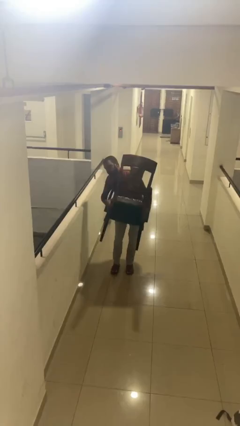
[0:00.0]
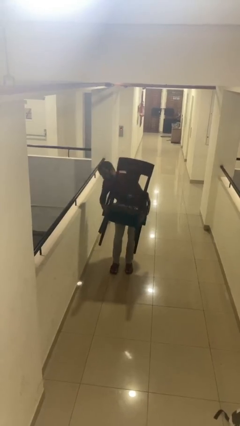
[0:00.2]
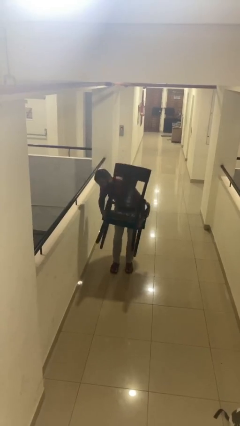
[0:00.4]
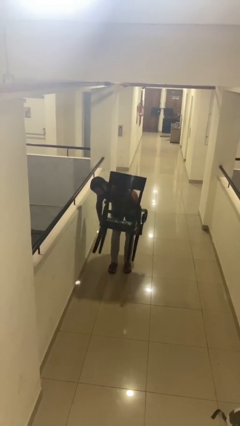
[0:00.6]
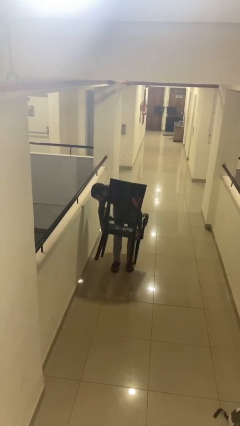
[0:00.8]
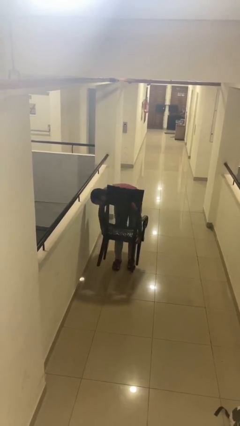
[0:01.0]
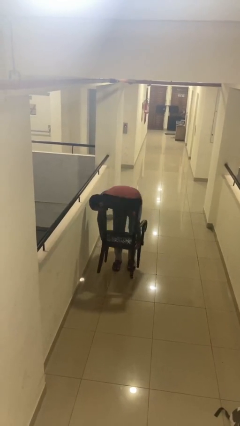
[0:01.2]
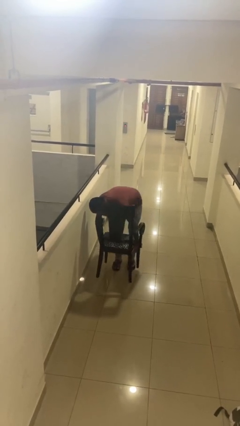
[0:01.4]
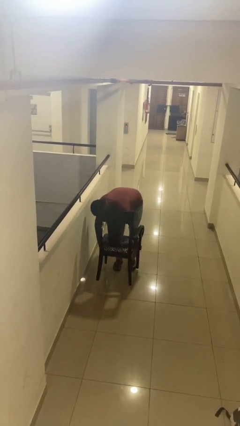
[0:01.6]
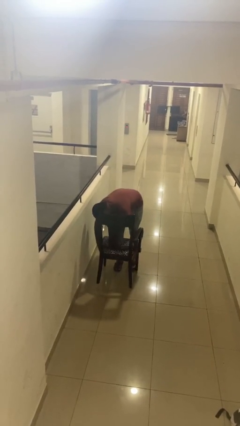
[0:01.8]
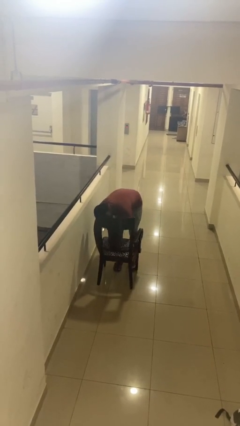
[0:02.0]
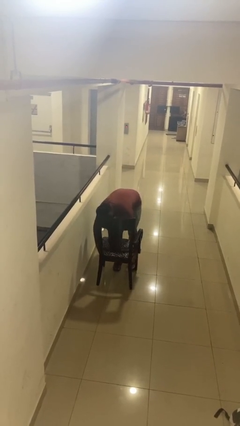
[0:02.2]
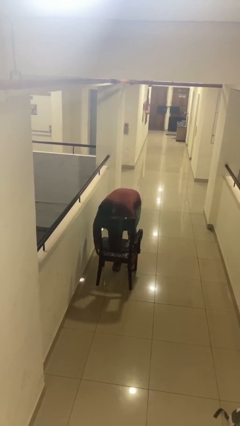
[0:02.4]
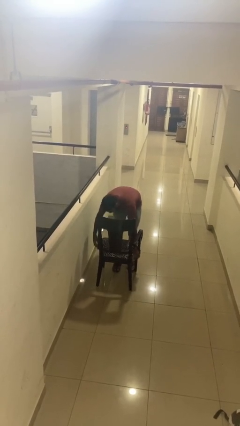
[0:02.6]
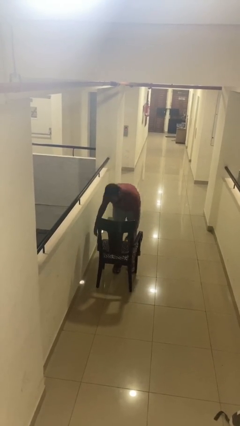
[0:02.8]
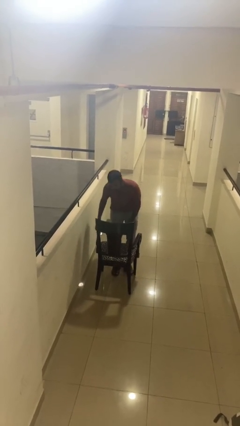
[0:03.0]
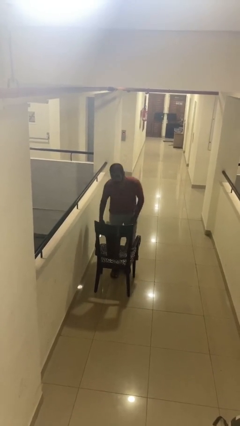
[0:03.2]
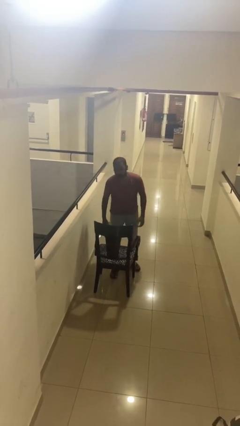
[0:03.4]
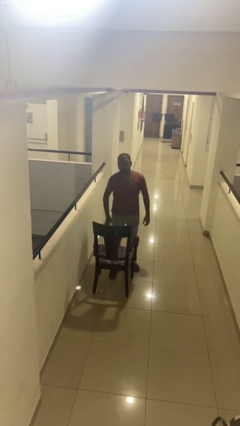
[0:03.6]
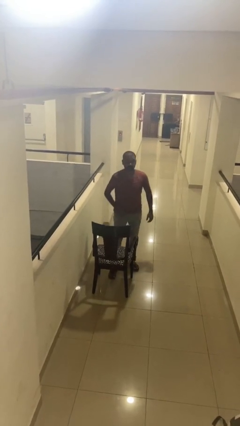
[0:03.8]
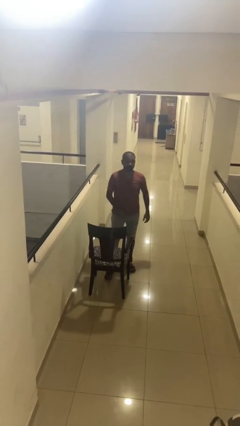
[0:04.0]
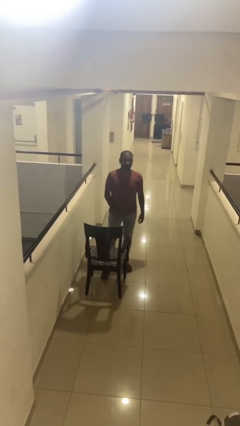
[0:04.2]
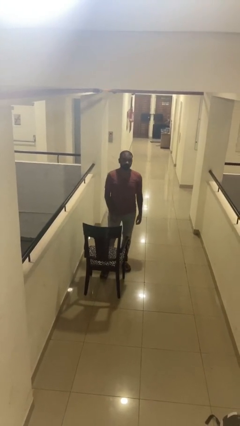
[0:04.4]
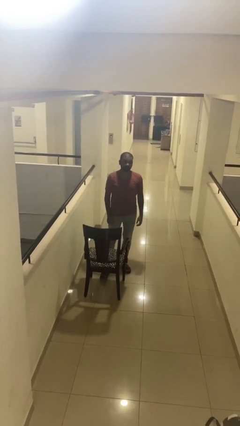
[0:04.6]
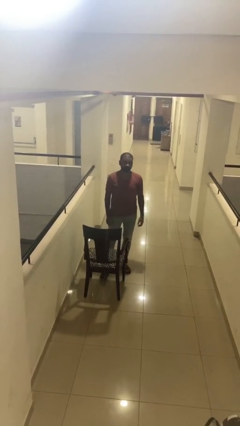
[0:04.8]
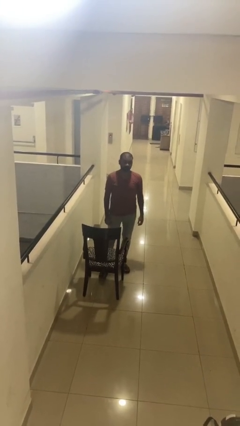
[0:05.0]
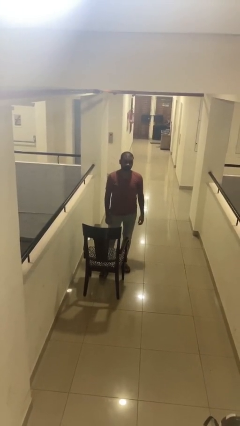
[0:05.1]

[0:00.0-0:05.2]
person puts down object on floor

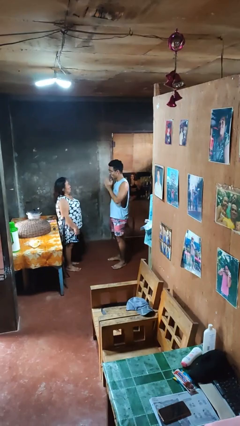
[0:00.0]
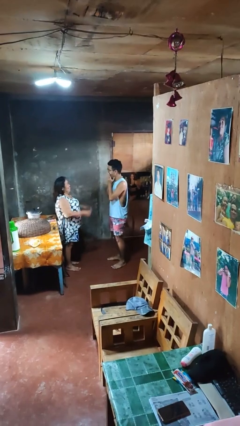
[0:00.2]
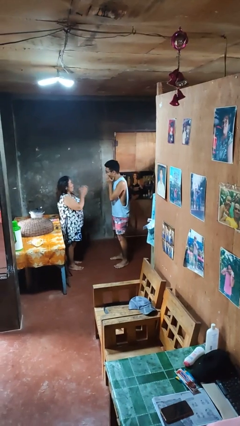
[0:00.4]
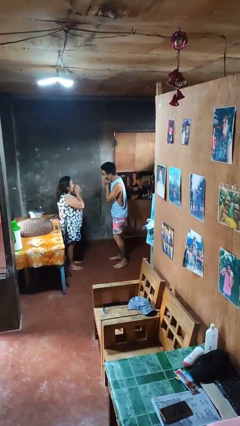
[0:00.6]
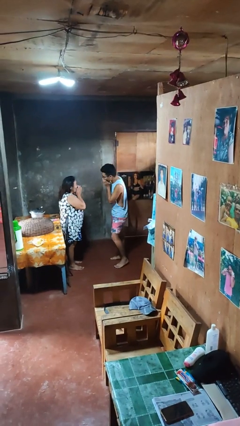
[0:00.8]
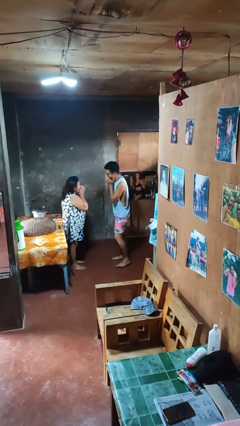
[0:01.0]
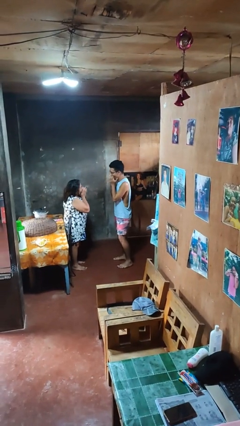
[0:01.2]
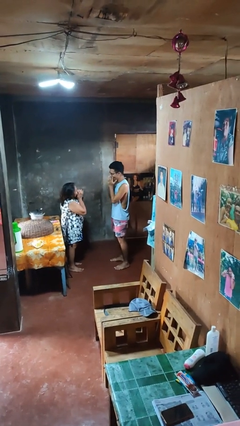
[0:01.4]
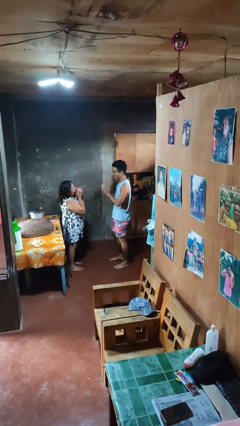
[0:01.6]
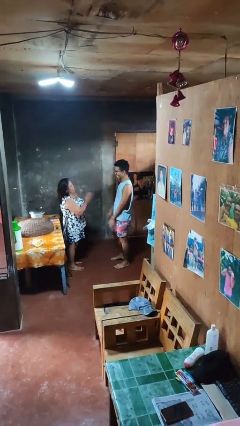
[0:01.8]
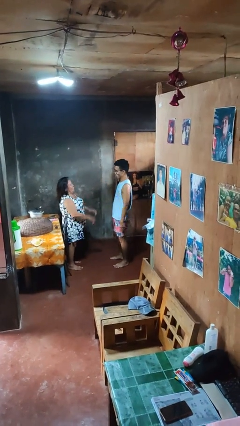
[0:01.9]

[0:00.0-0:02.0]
person laughs with person

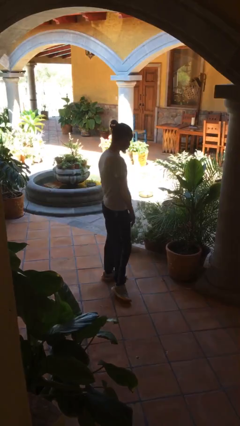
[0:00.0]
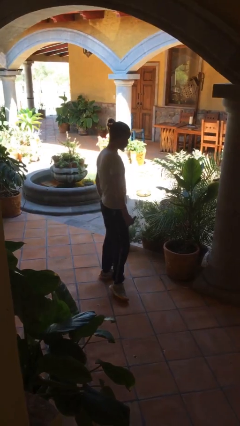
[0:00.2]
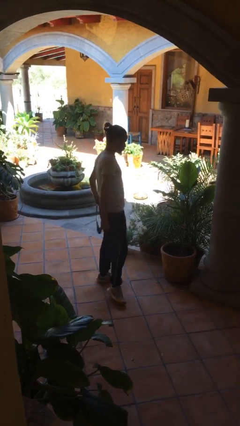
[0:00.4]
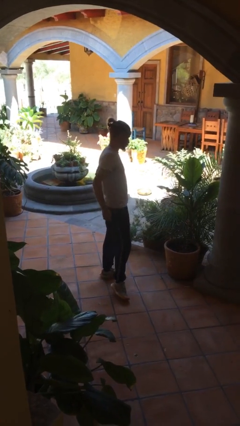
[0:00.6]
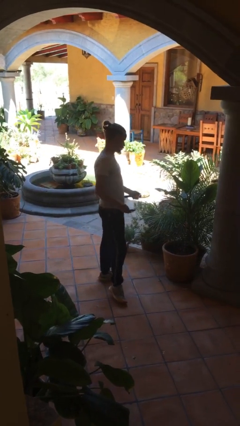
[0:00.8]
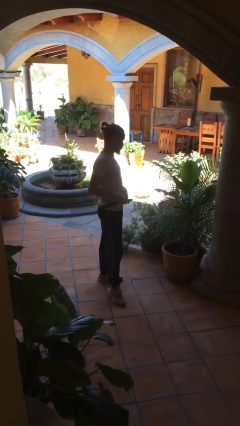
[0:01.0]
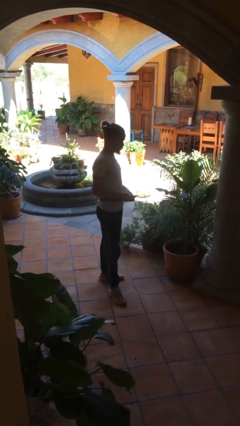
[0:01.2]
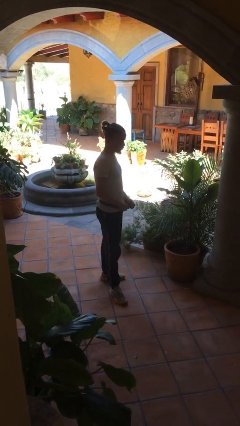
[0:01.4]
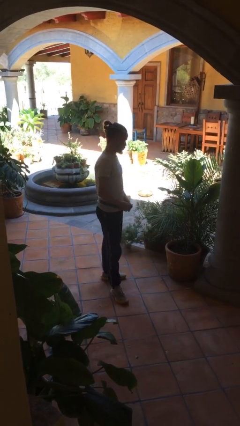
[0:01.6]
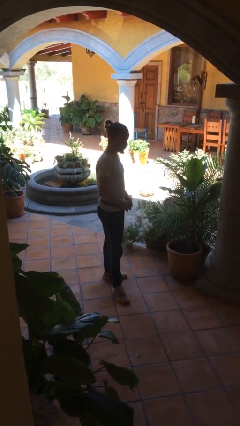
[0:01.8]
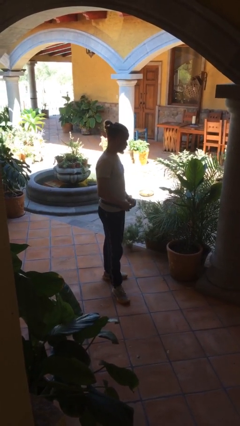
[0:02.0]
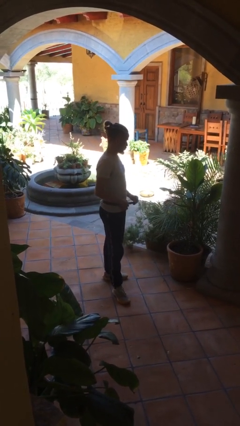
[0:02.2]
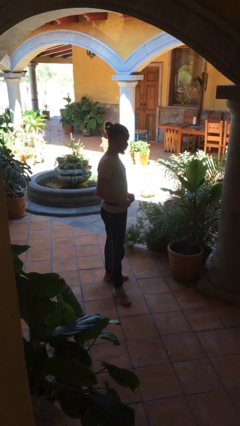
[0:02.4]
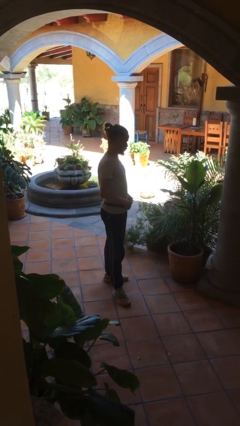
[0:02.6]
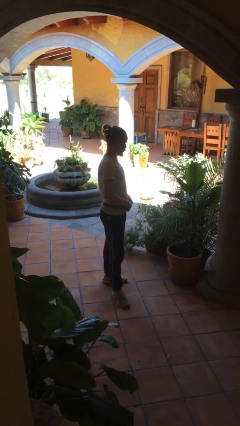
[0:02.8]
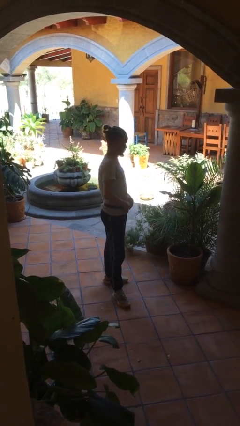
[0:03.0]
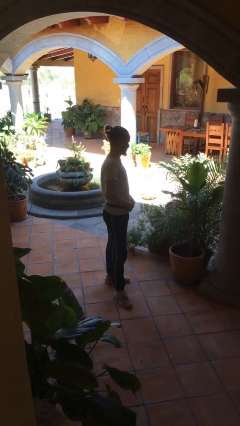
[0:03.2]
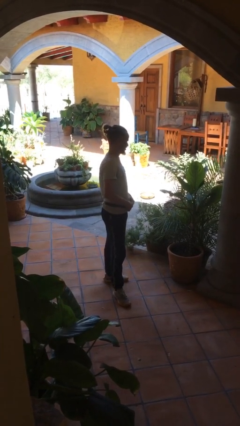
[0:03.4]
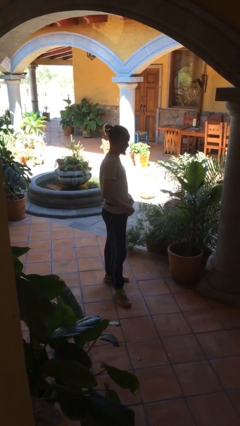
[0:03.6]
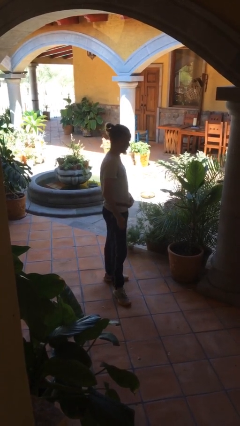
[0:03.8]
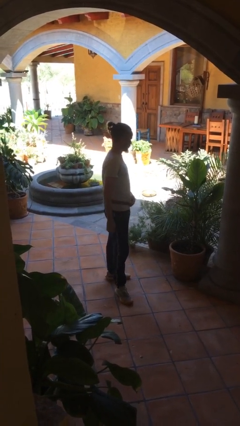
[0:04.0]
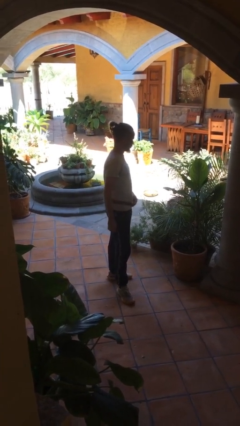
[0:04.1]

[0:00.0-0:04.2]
person puts on belt

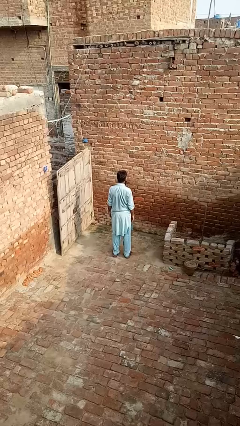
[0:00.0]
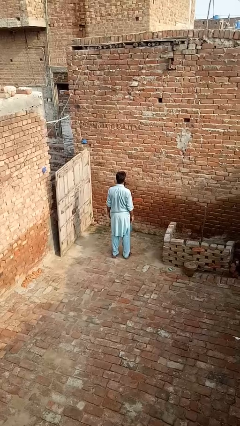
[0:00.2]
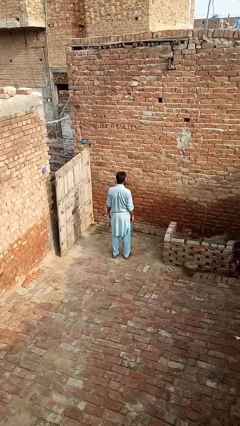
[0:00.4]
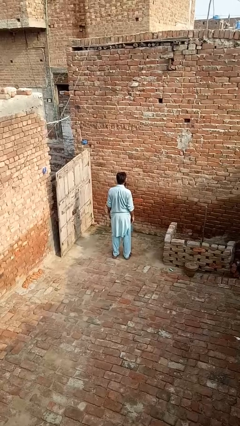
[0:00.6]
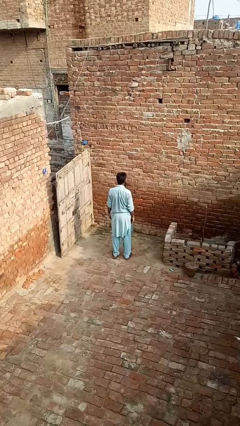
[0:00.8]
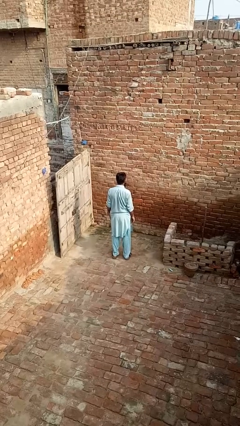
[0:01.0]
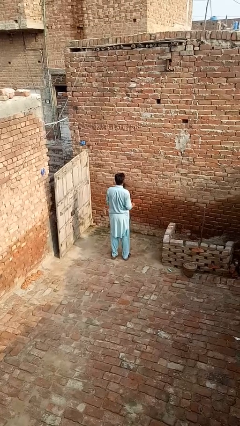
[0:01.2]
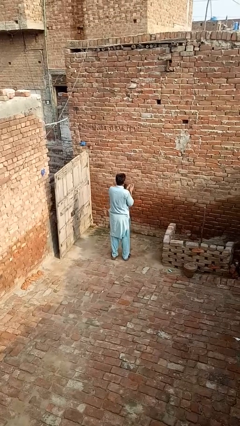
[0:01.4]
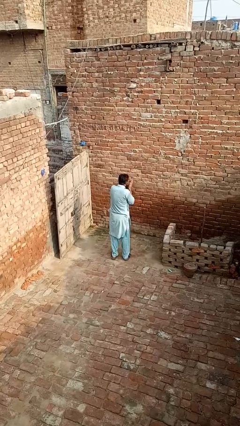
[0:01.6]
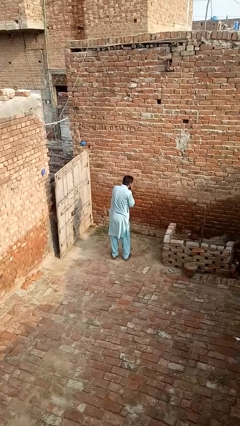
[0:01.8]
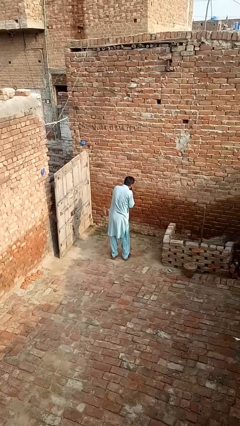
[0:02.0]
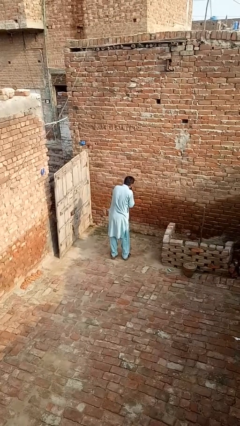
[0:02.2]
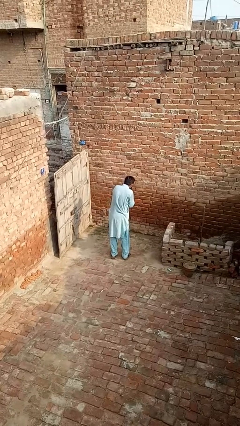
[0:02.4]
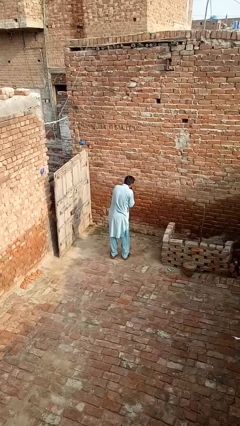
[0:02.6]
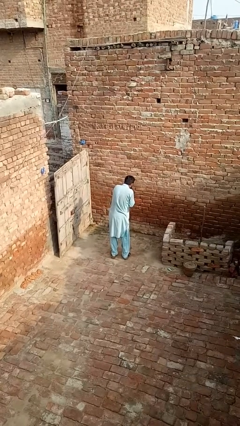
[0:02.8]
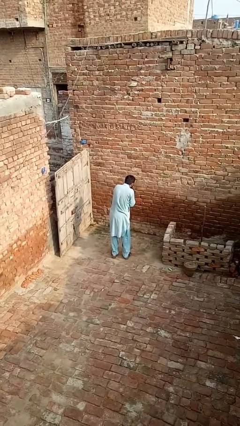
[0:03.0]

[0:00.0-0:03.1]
person sneezes into hand

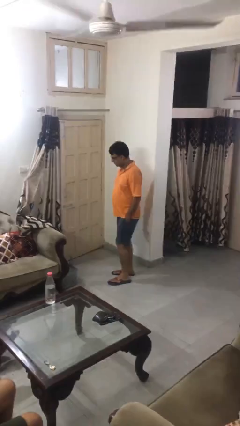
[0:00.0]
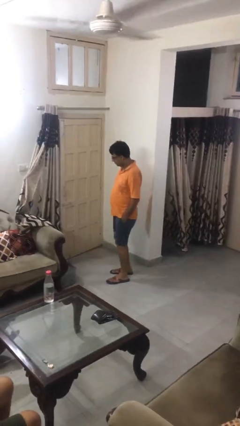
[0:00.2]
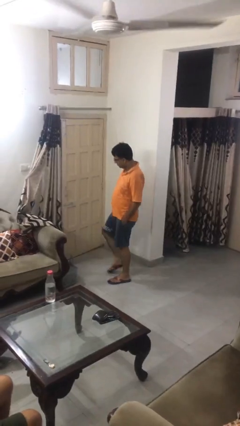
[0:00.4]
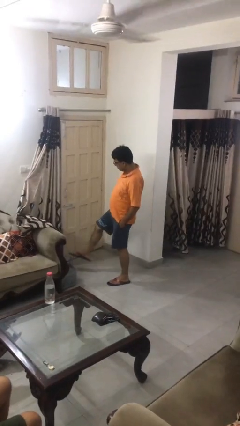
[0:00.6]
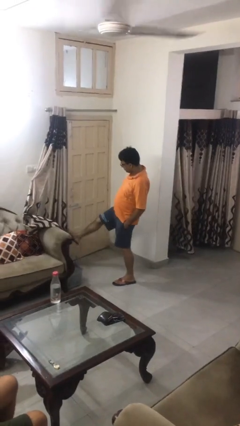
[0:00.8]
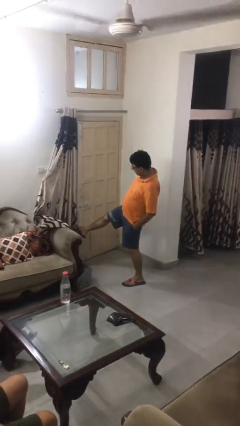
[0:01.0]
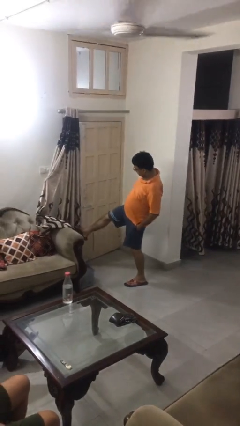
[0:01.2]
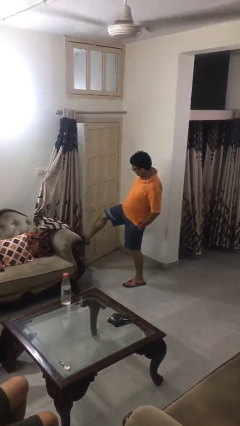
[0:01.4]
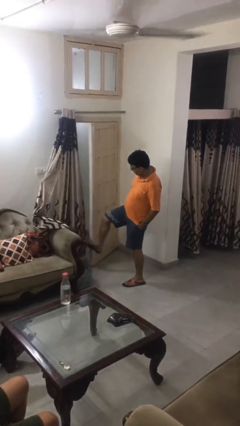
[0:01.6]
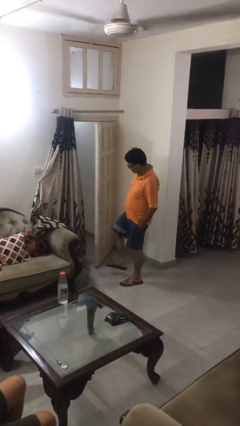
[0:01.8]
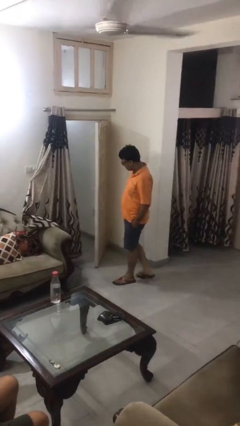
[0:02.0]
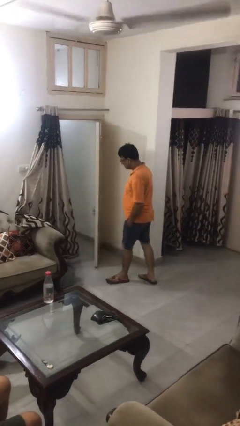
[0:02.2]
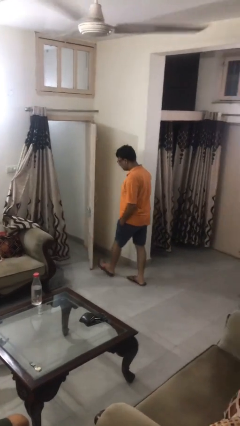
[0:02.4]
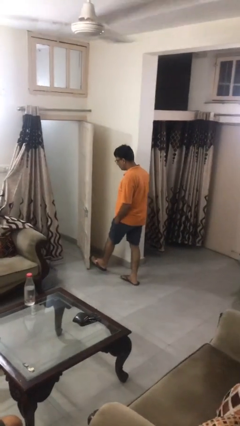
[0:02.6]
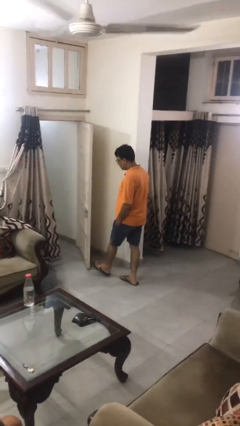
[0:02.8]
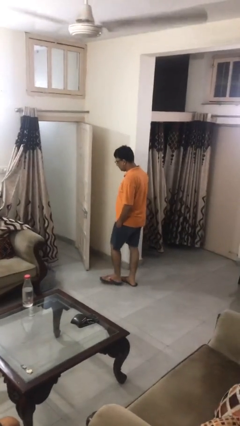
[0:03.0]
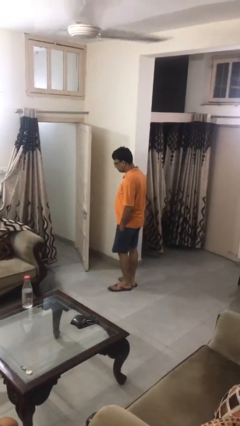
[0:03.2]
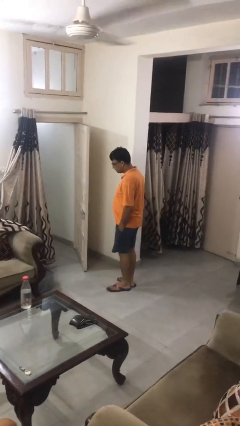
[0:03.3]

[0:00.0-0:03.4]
person opens facility door
